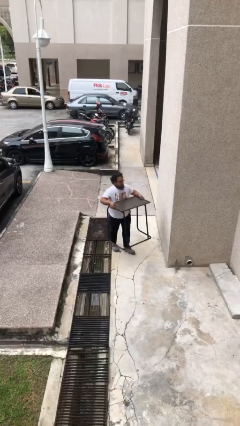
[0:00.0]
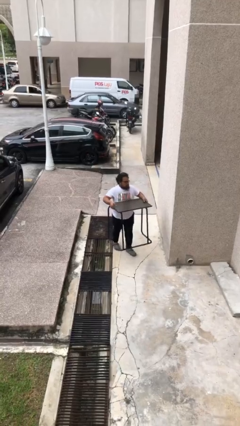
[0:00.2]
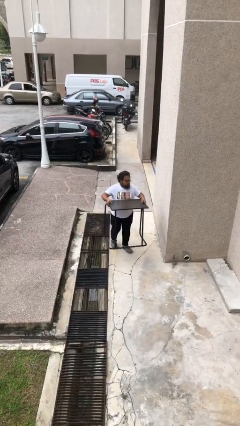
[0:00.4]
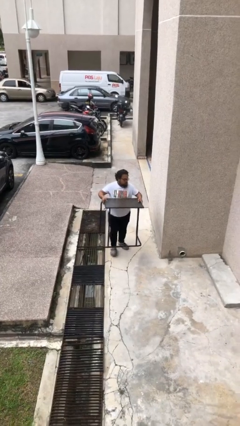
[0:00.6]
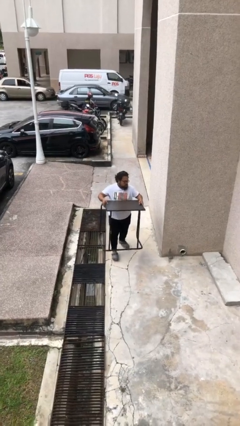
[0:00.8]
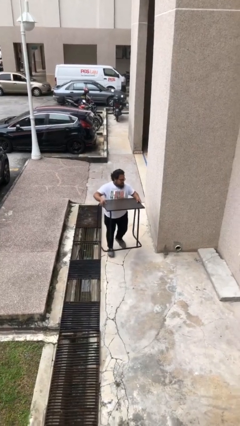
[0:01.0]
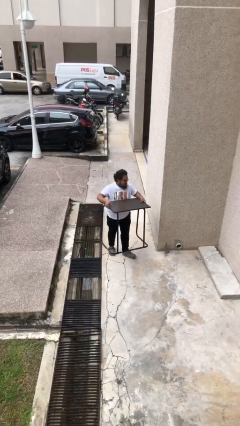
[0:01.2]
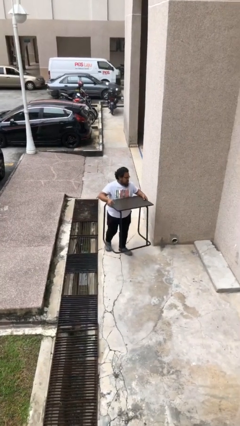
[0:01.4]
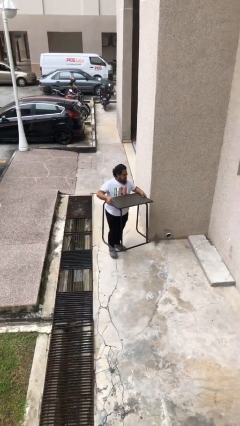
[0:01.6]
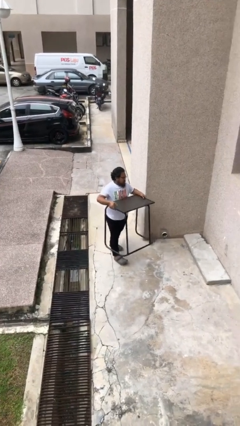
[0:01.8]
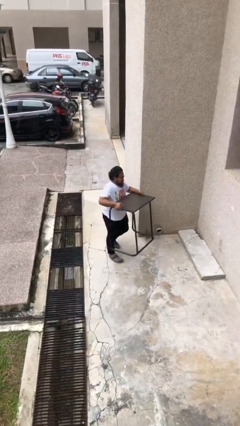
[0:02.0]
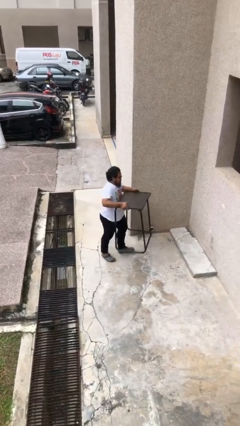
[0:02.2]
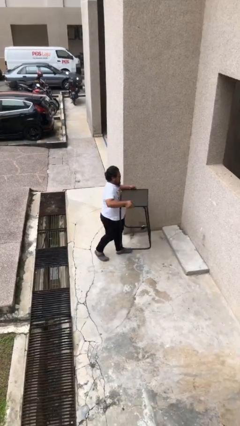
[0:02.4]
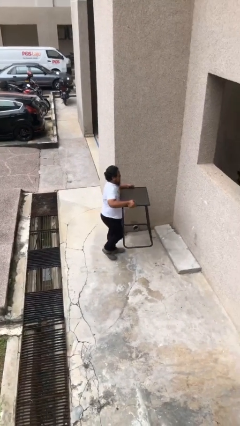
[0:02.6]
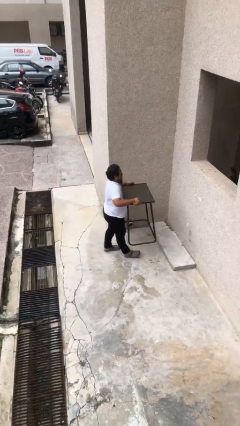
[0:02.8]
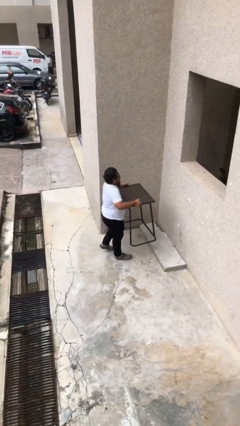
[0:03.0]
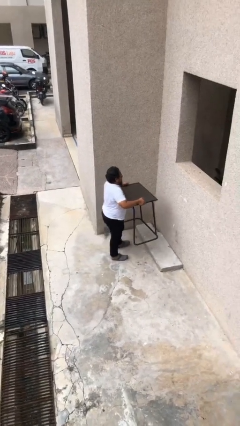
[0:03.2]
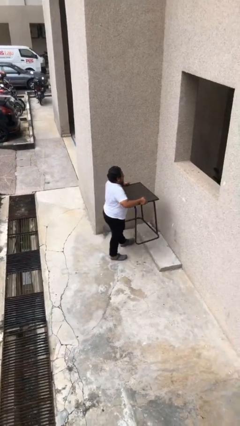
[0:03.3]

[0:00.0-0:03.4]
person carries heavy object

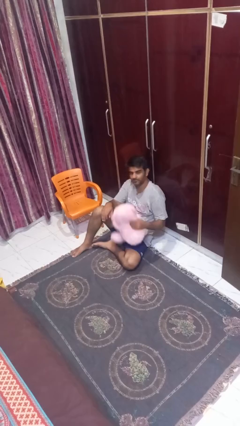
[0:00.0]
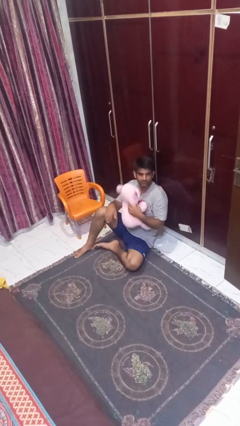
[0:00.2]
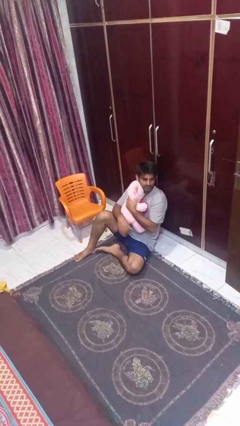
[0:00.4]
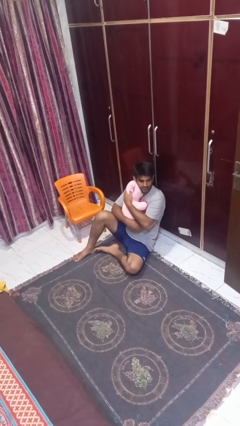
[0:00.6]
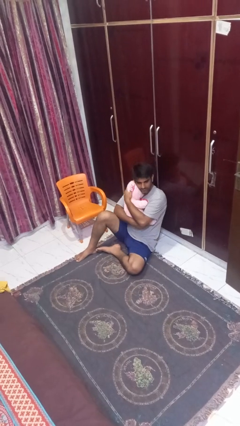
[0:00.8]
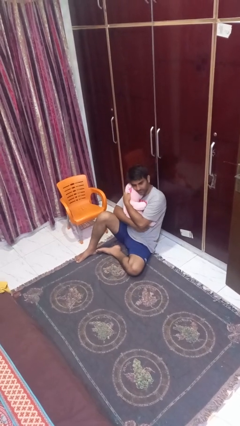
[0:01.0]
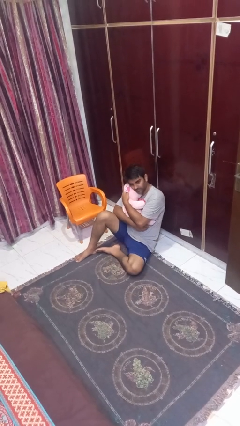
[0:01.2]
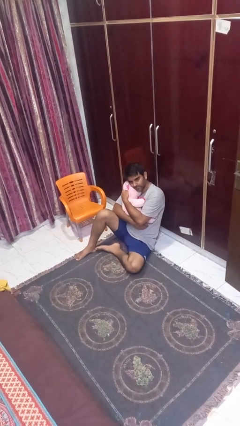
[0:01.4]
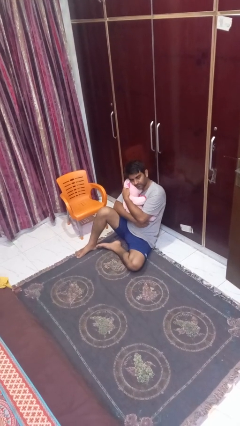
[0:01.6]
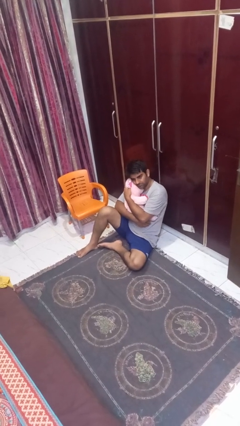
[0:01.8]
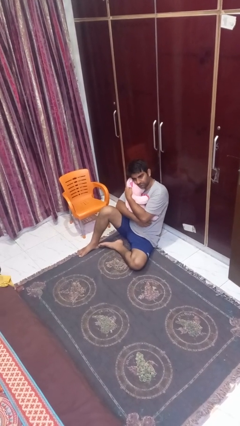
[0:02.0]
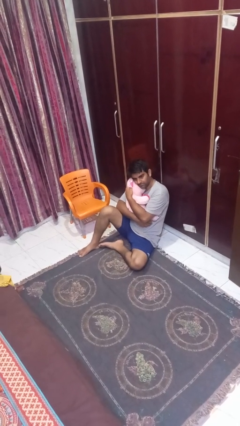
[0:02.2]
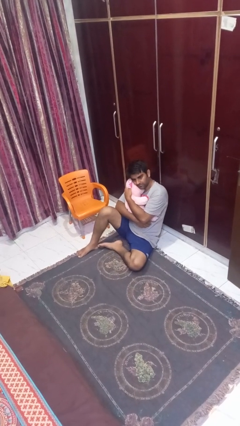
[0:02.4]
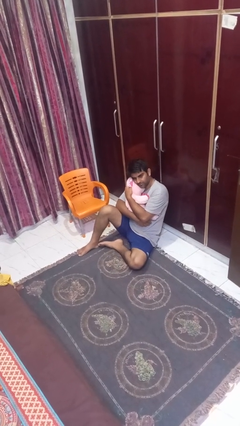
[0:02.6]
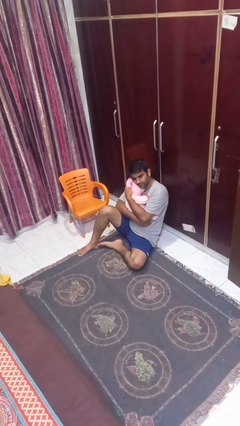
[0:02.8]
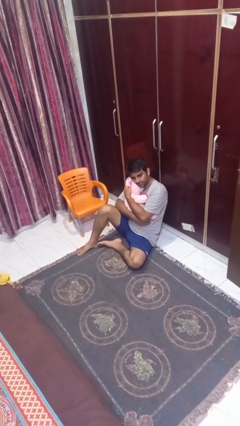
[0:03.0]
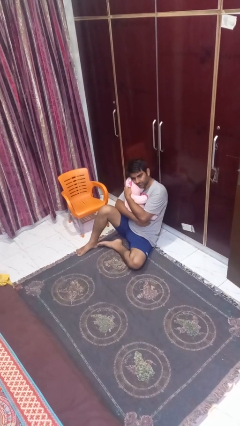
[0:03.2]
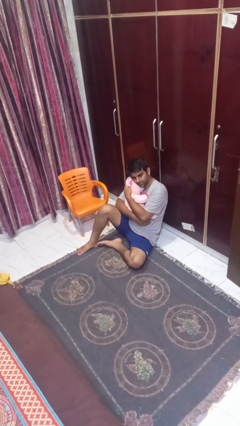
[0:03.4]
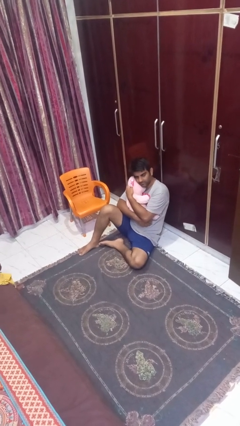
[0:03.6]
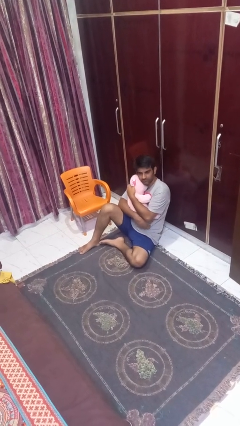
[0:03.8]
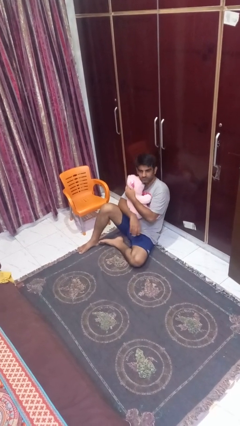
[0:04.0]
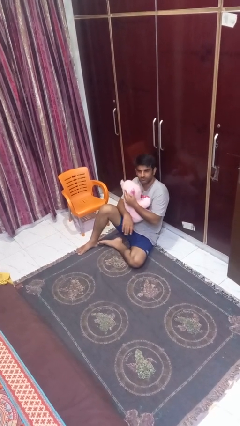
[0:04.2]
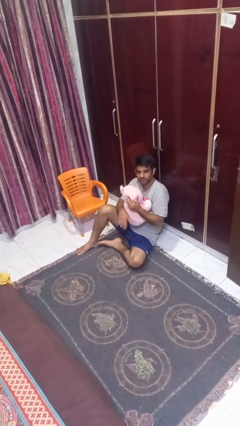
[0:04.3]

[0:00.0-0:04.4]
person hugs stuffed animal

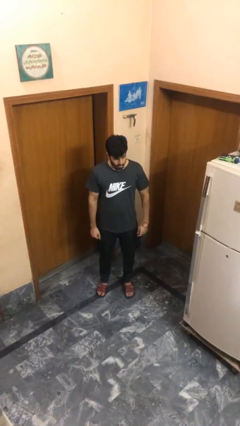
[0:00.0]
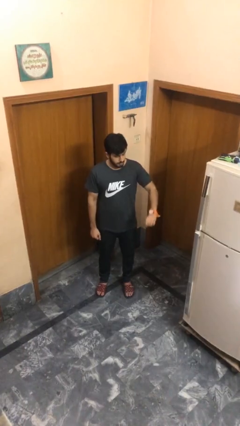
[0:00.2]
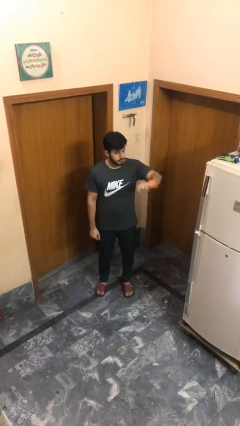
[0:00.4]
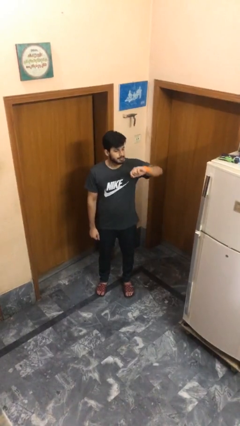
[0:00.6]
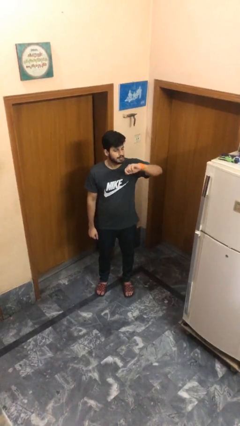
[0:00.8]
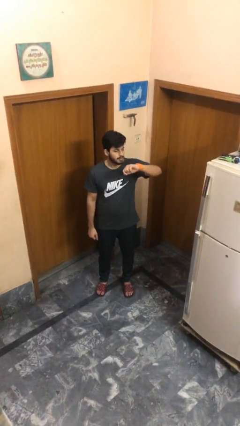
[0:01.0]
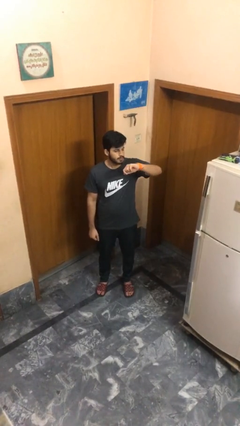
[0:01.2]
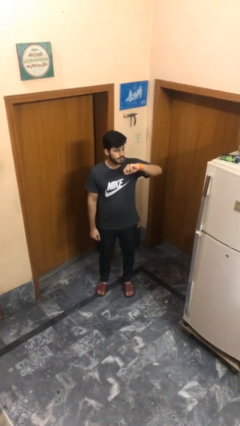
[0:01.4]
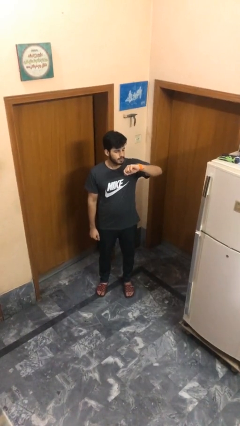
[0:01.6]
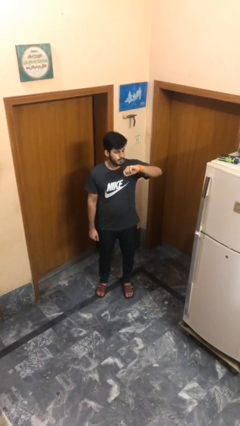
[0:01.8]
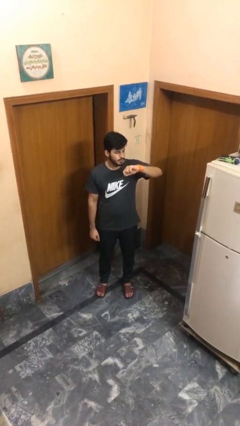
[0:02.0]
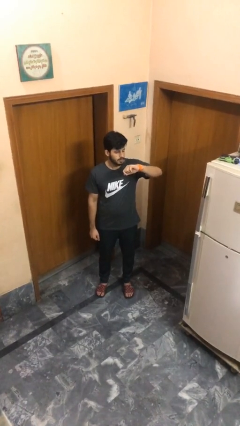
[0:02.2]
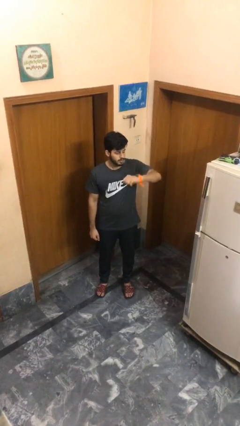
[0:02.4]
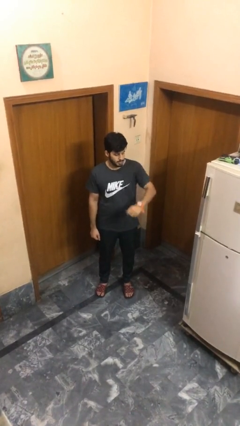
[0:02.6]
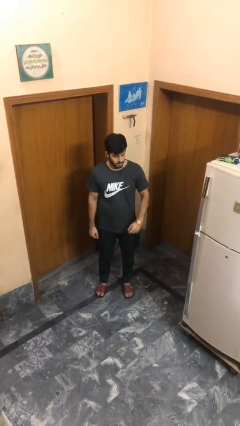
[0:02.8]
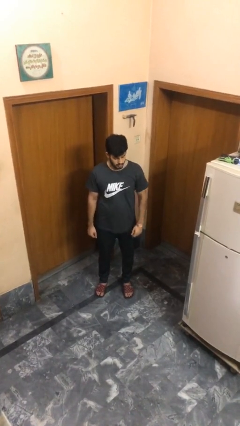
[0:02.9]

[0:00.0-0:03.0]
person looks at wristwatch

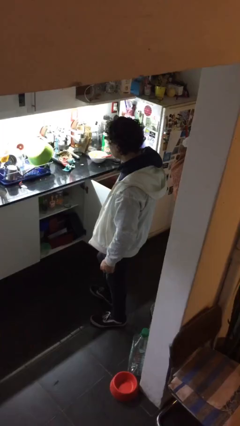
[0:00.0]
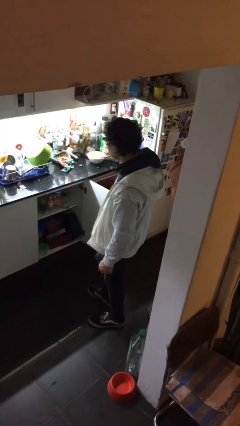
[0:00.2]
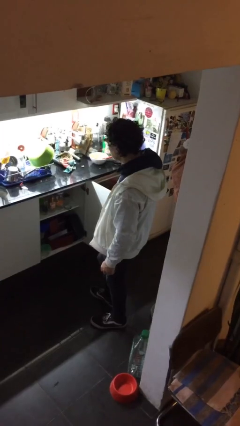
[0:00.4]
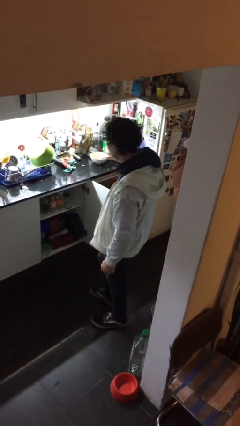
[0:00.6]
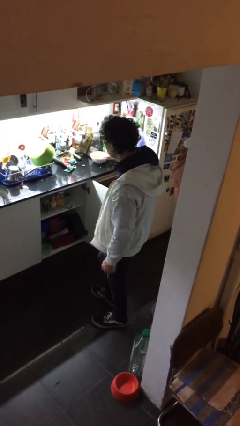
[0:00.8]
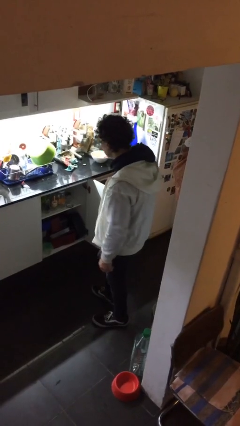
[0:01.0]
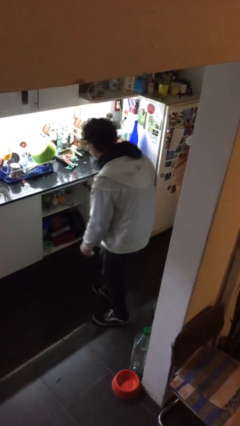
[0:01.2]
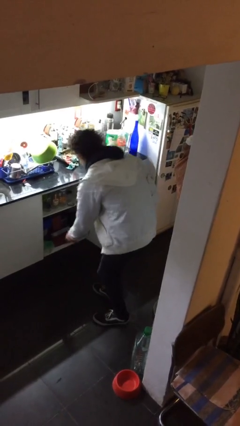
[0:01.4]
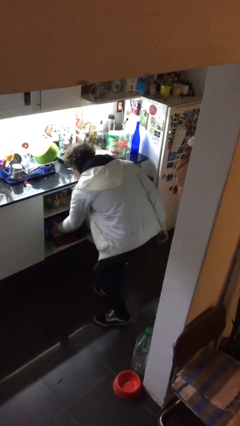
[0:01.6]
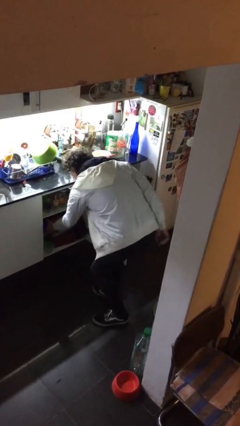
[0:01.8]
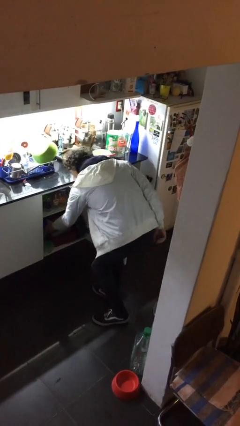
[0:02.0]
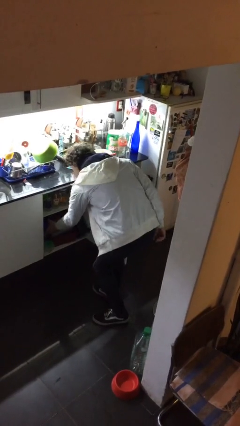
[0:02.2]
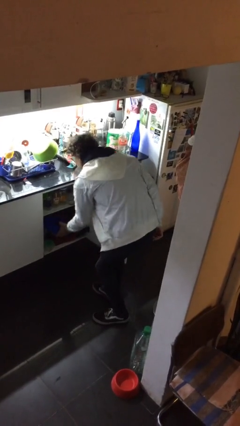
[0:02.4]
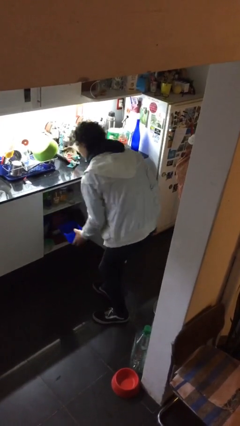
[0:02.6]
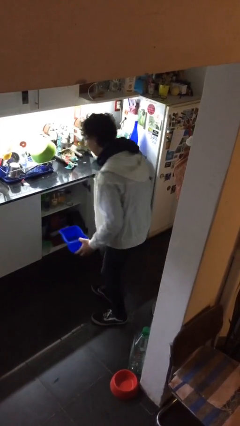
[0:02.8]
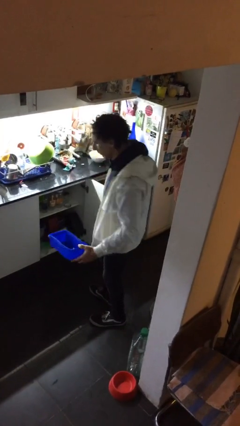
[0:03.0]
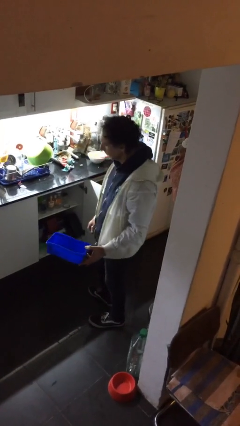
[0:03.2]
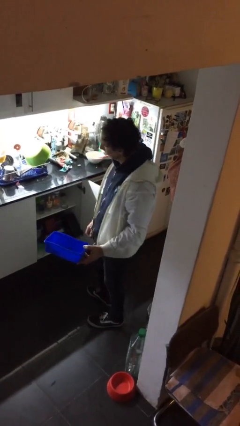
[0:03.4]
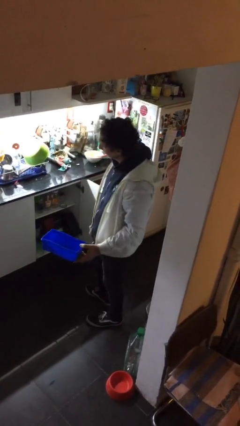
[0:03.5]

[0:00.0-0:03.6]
person picks up object from cabinet

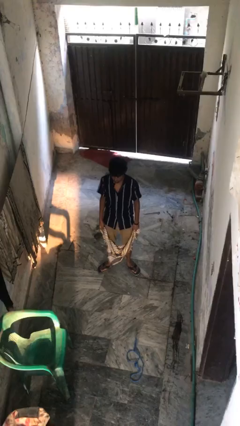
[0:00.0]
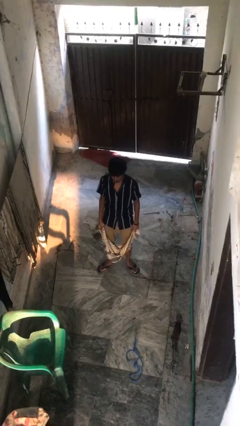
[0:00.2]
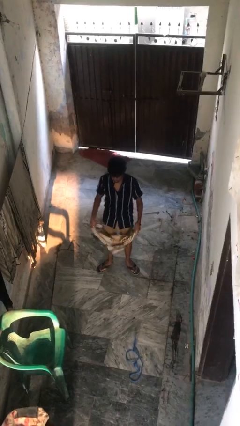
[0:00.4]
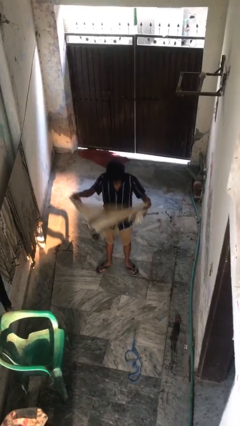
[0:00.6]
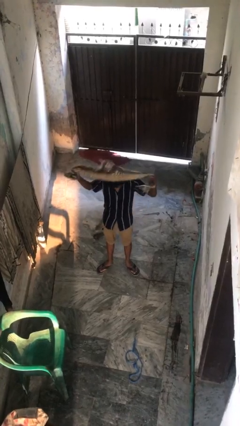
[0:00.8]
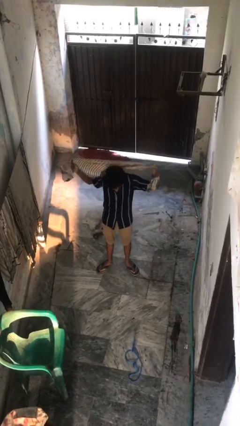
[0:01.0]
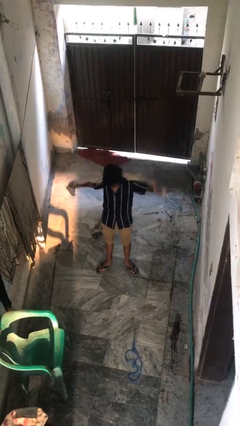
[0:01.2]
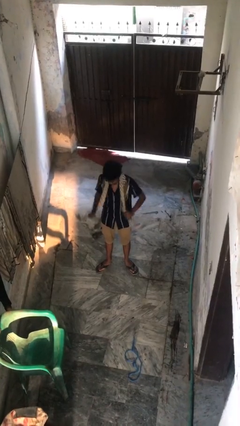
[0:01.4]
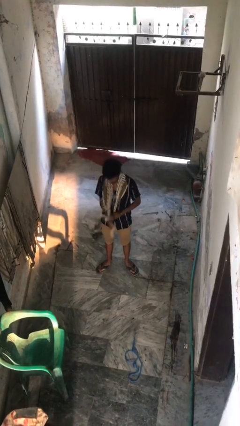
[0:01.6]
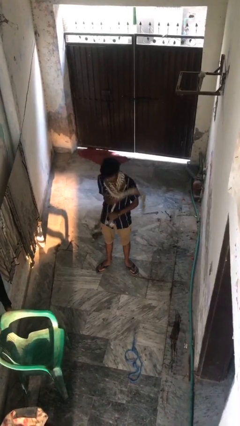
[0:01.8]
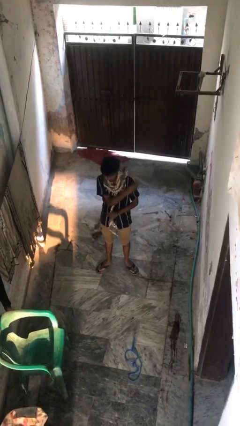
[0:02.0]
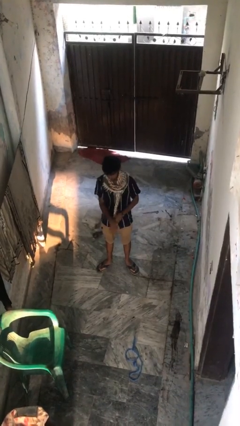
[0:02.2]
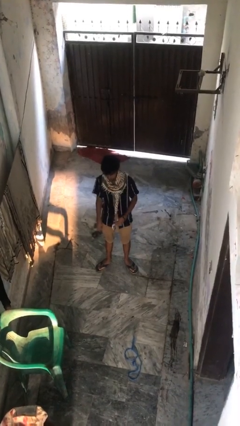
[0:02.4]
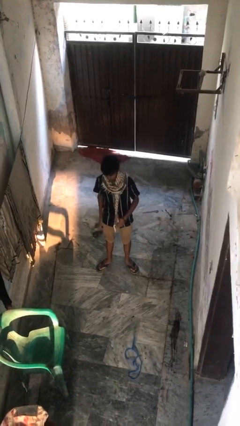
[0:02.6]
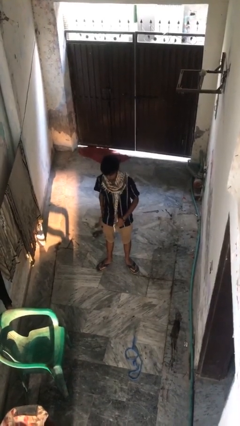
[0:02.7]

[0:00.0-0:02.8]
person puts on scarf
